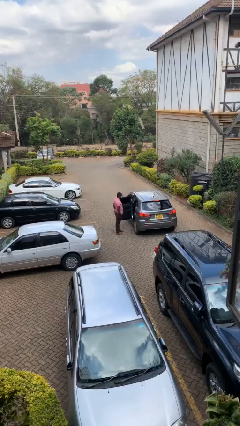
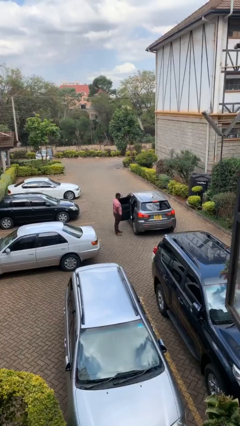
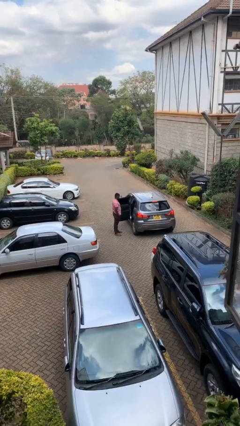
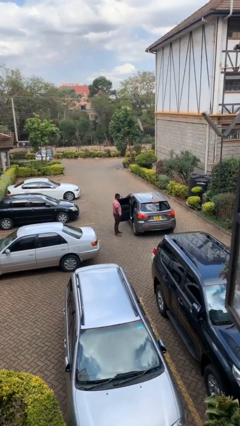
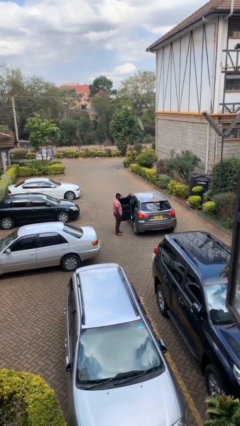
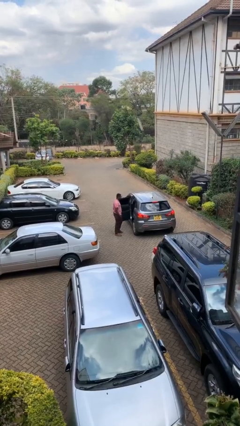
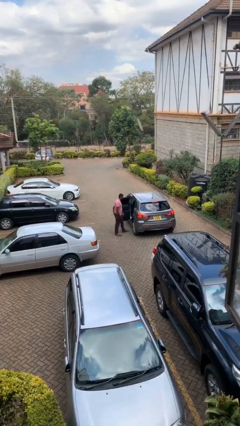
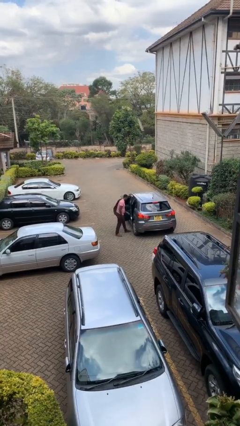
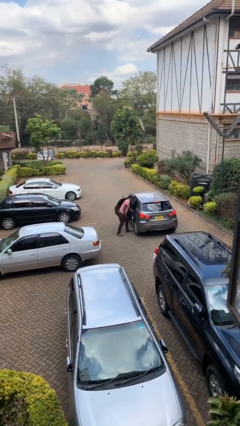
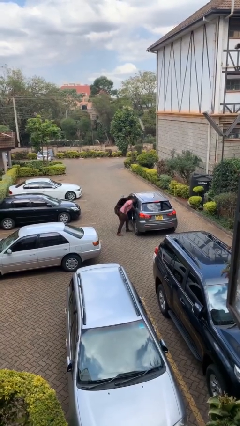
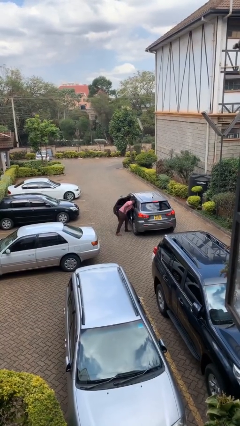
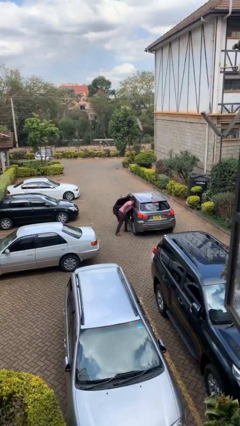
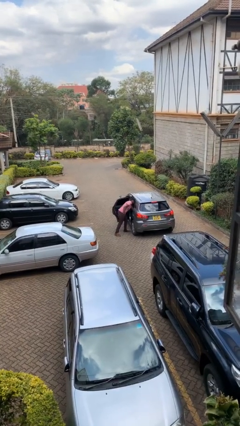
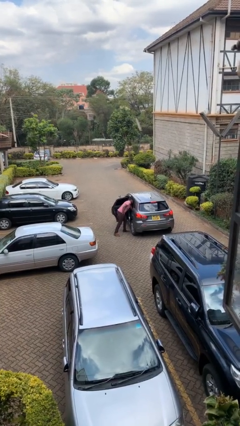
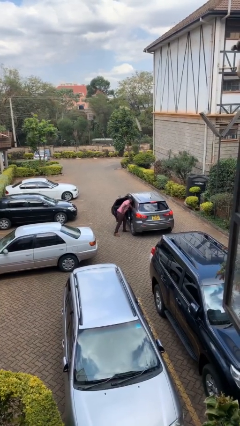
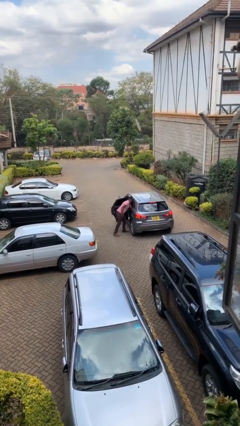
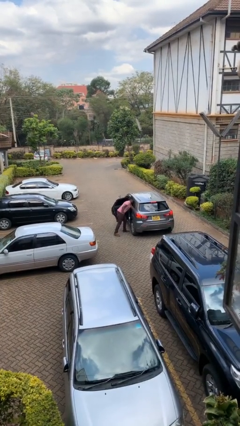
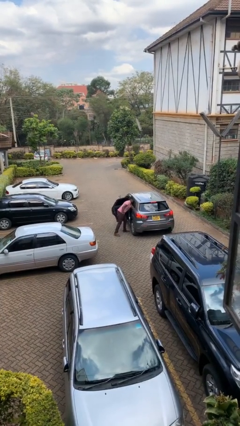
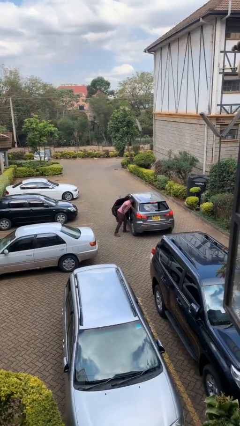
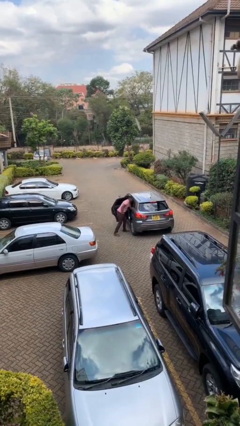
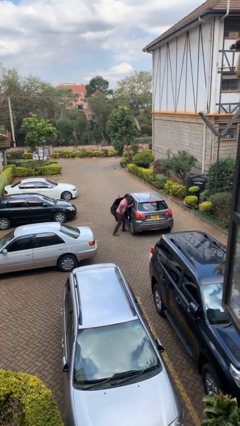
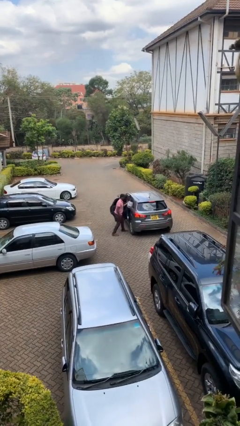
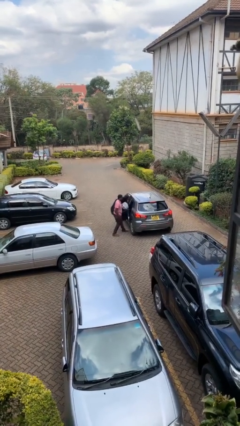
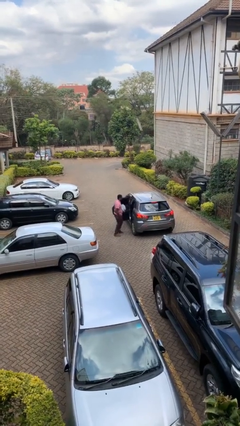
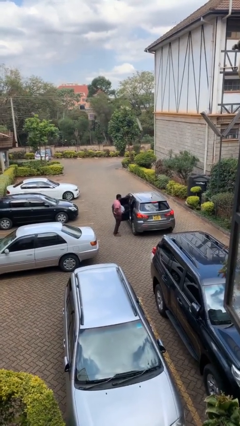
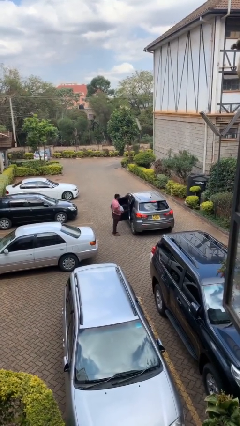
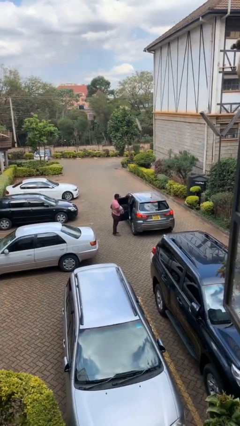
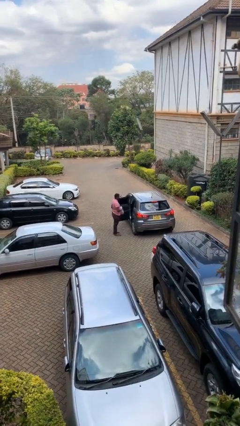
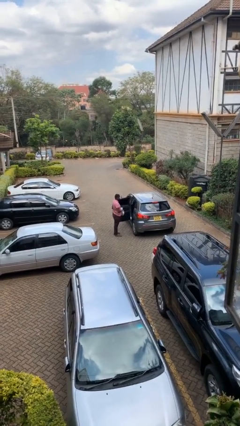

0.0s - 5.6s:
person unloads car

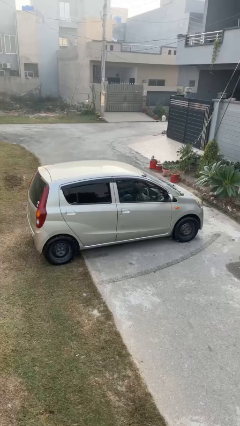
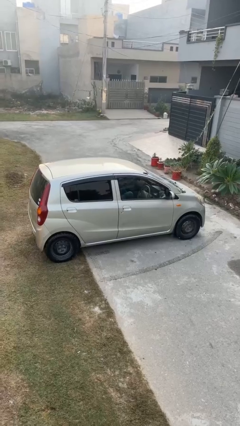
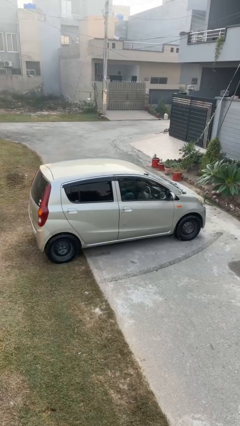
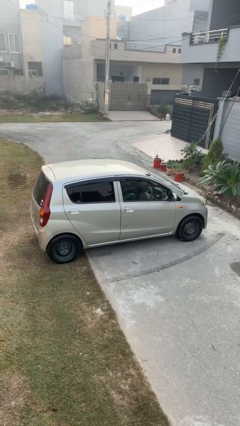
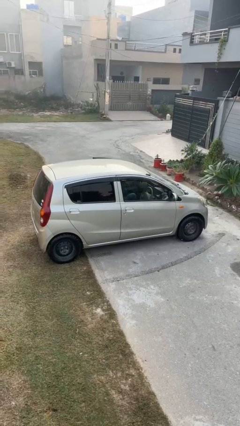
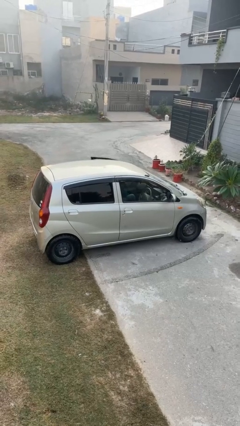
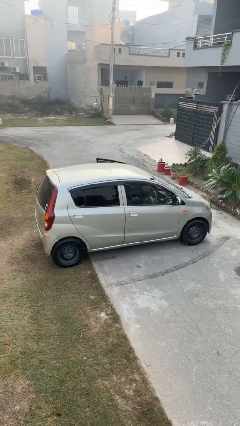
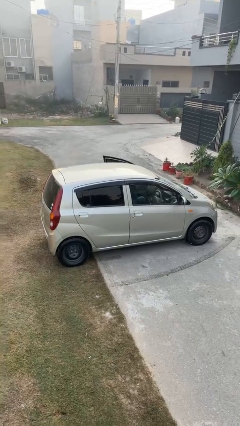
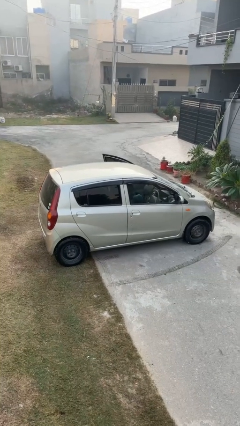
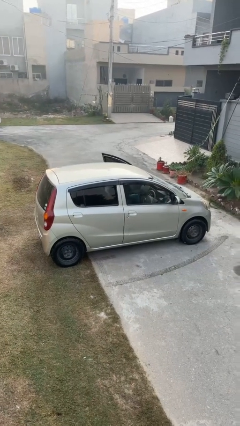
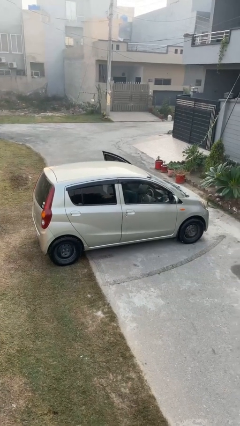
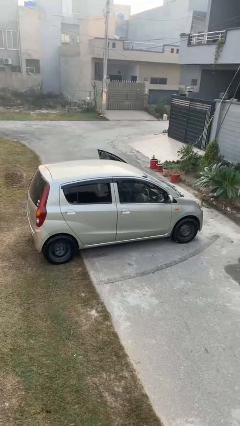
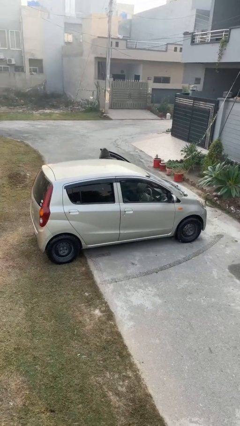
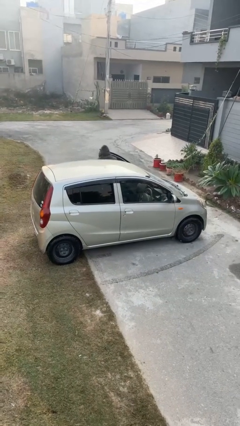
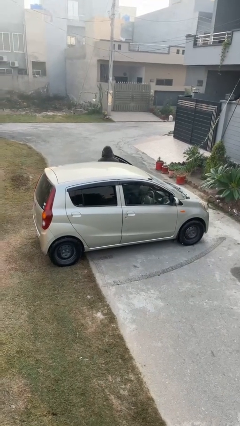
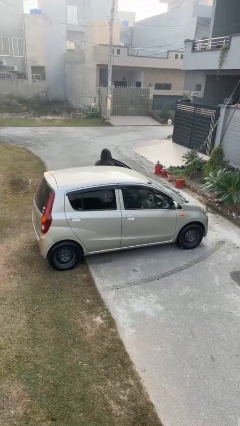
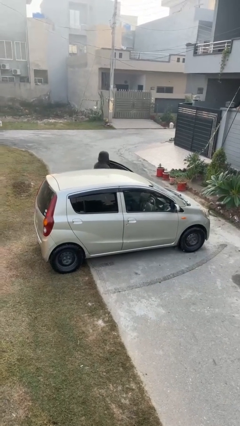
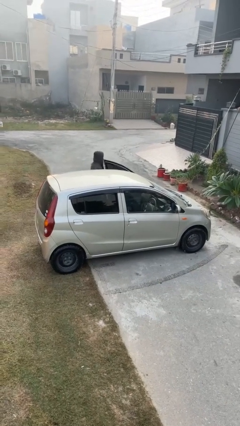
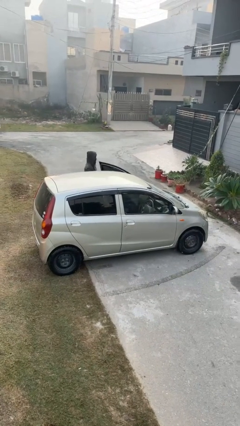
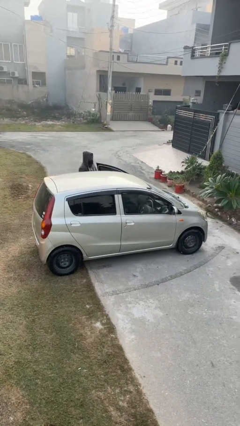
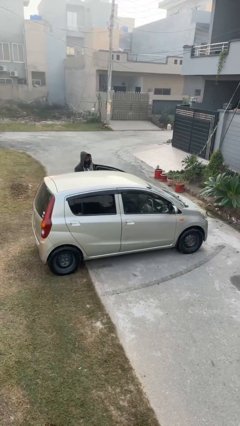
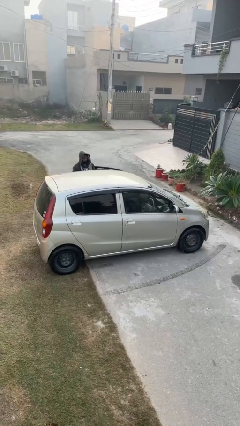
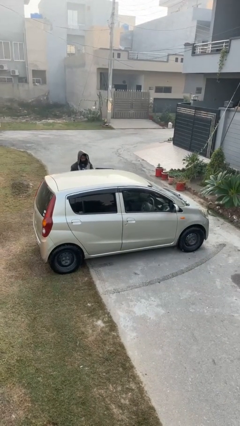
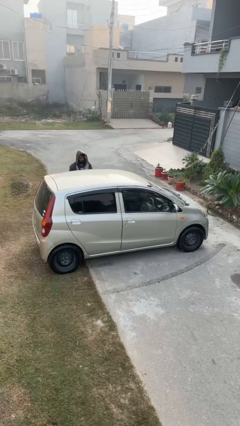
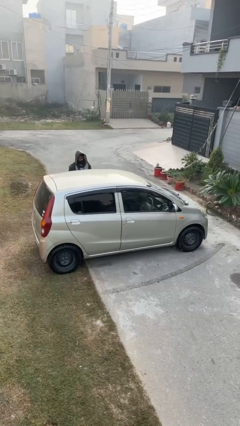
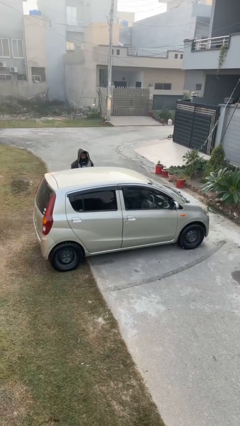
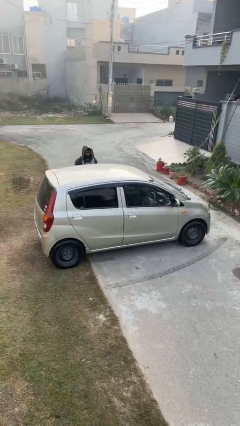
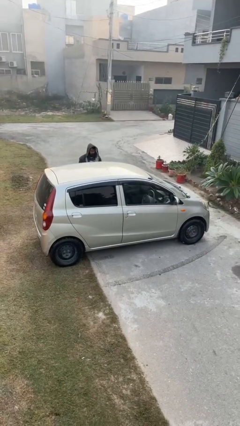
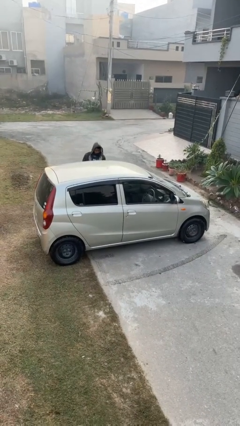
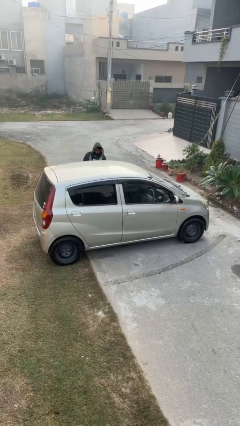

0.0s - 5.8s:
car drops off person

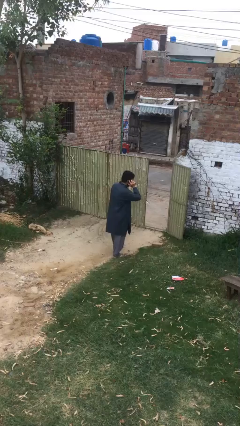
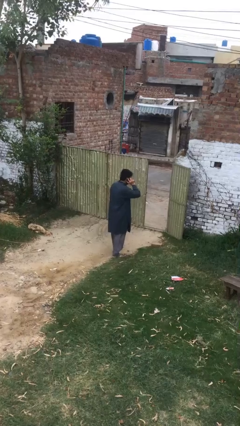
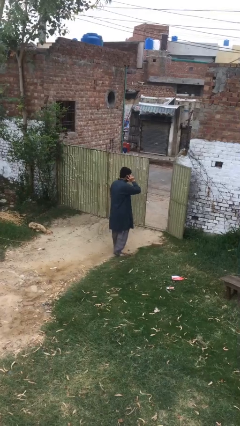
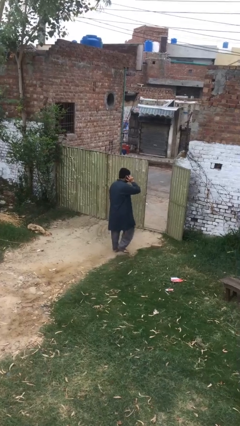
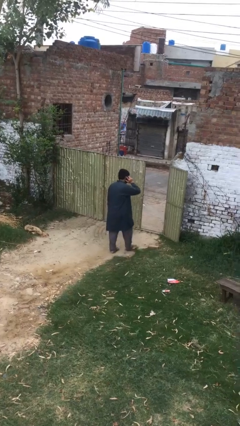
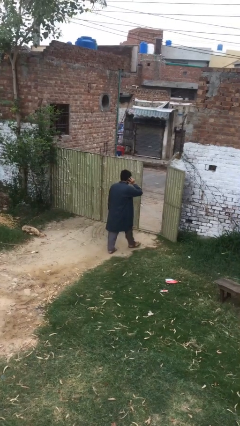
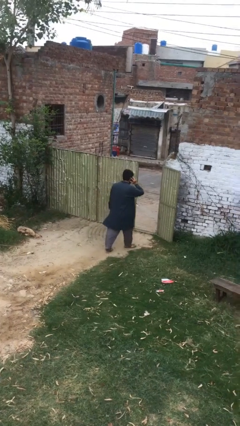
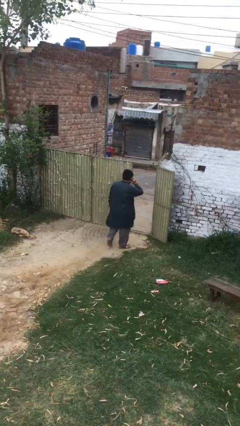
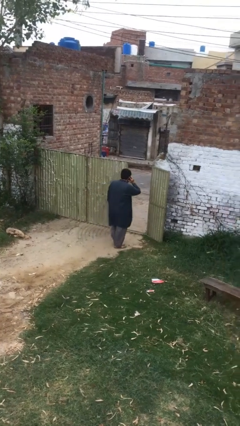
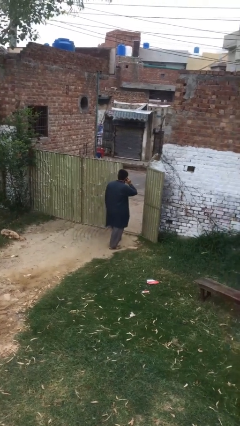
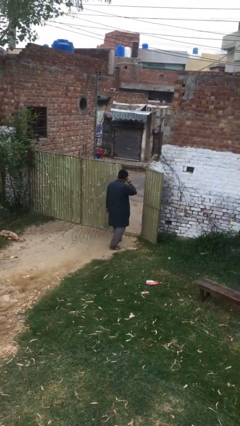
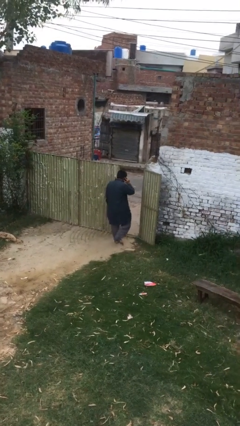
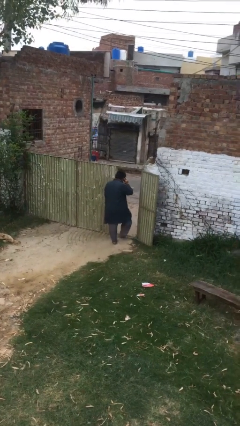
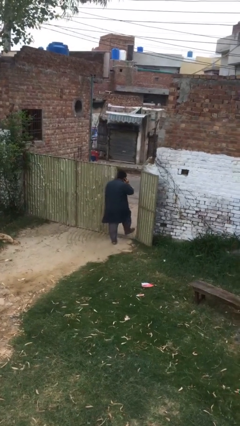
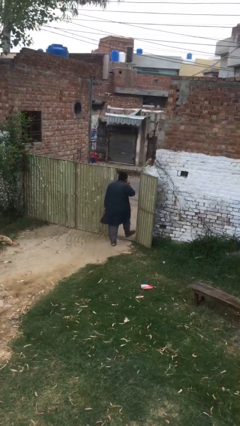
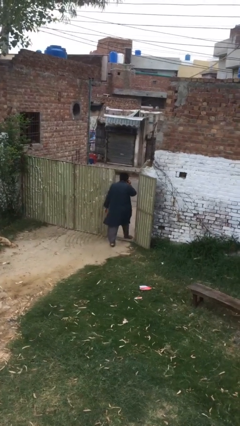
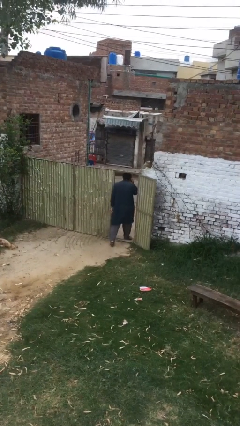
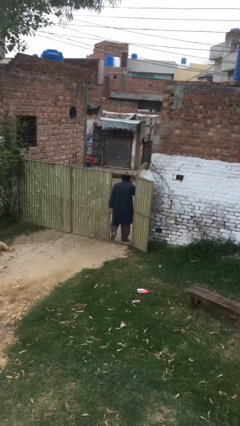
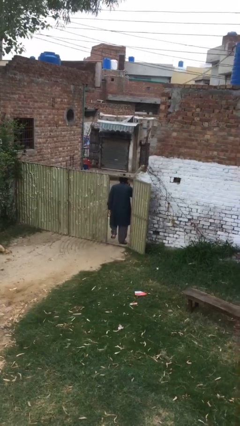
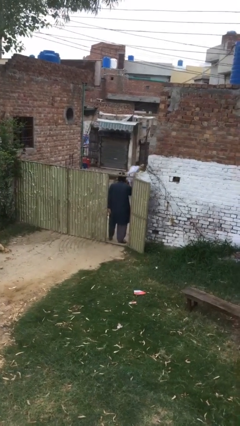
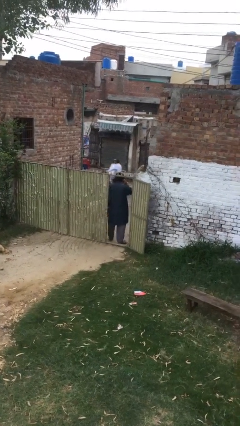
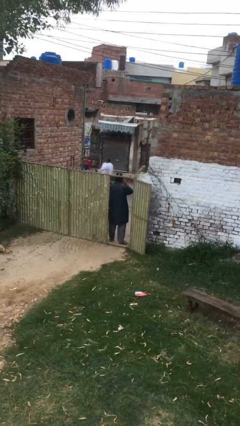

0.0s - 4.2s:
person exits scene through structure

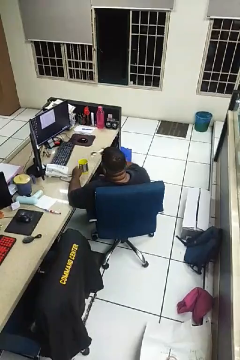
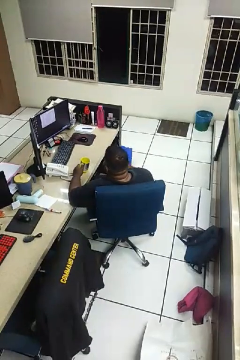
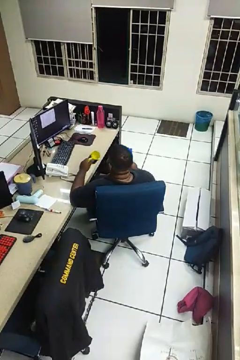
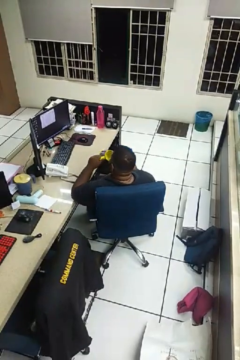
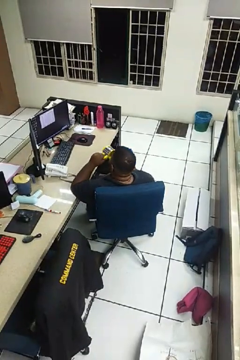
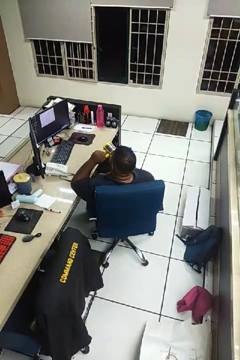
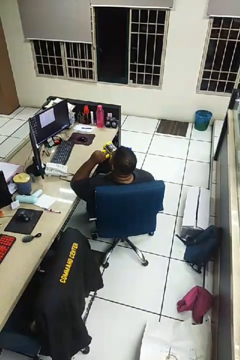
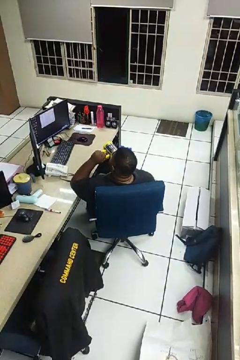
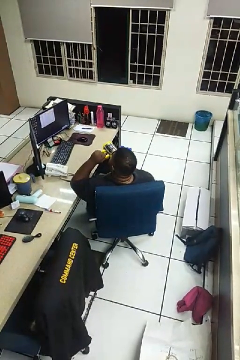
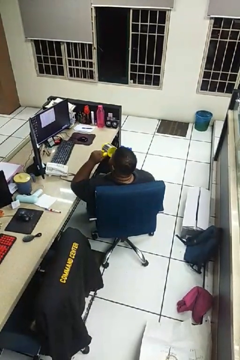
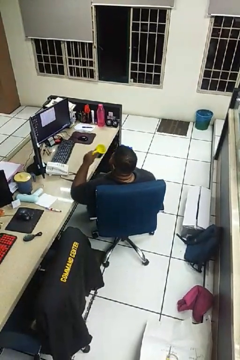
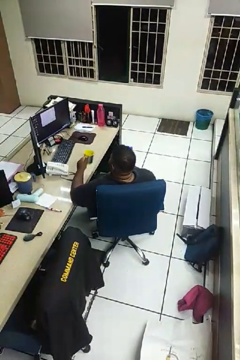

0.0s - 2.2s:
person drinks from mug
